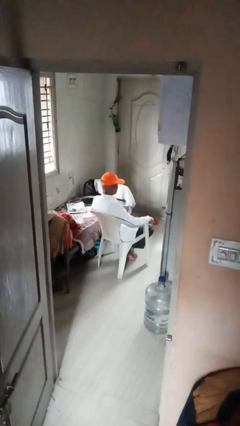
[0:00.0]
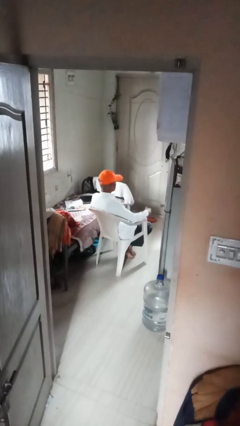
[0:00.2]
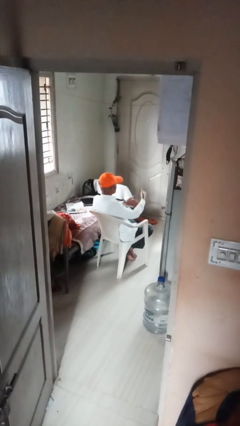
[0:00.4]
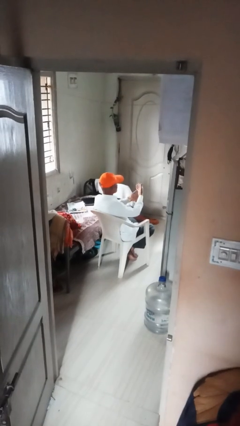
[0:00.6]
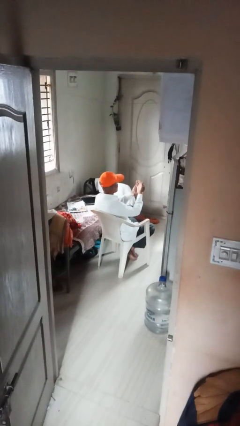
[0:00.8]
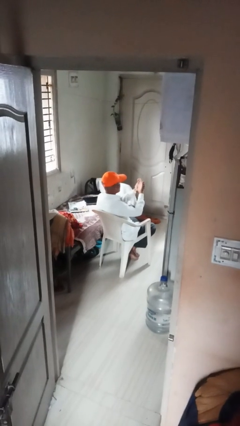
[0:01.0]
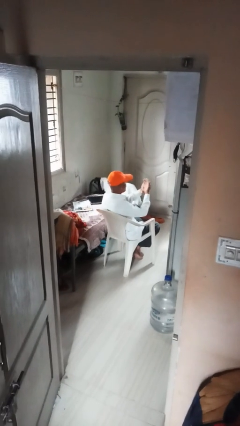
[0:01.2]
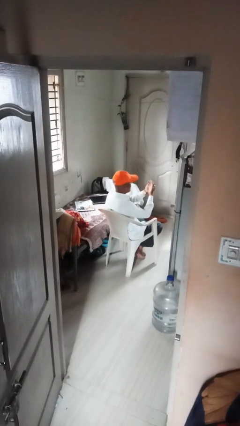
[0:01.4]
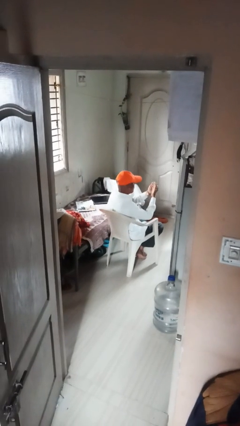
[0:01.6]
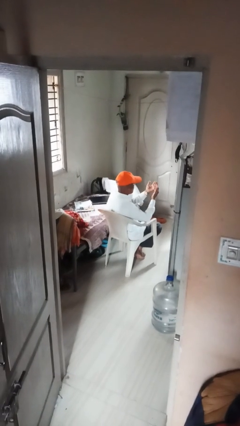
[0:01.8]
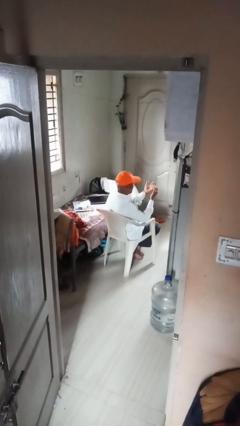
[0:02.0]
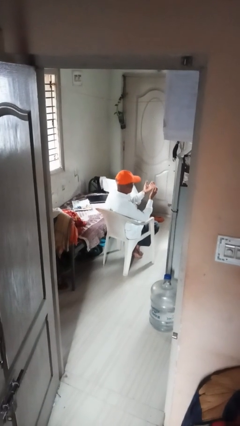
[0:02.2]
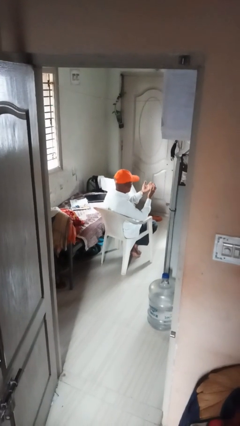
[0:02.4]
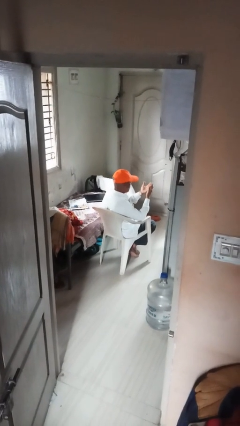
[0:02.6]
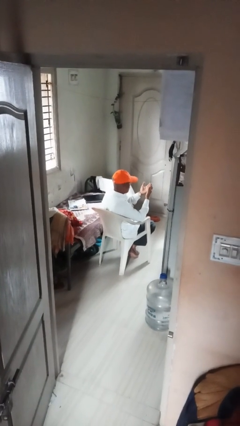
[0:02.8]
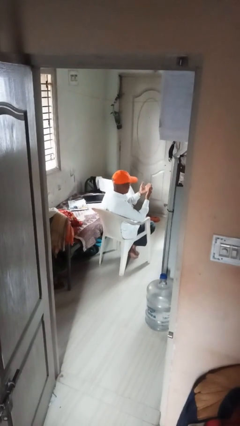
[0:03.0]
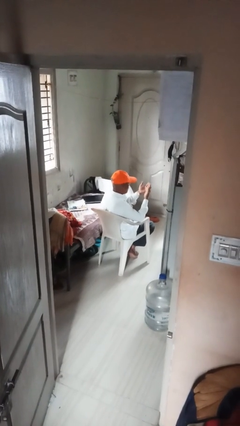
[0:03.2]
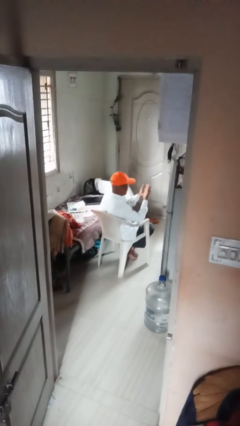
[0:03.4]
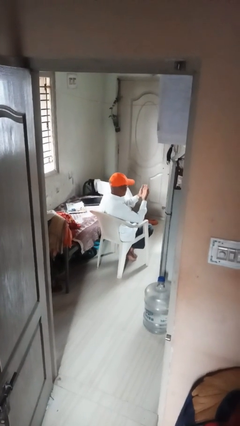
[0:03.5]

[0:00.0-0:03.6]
person looks at hands in lap

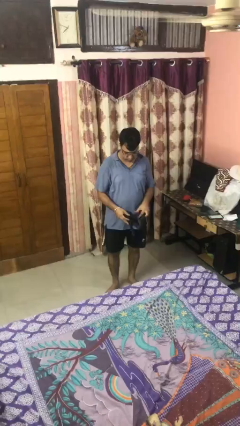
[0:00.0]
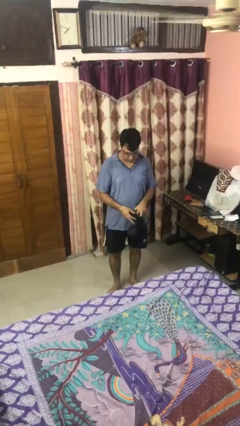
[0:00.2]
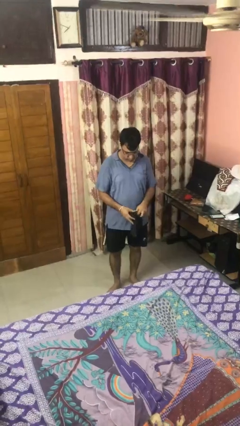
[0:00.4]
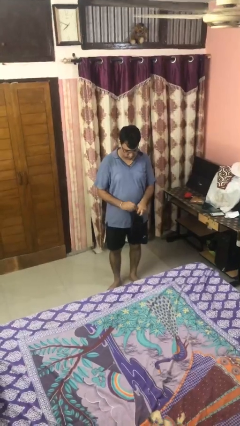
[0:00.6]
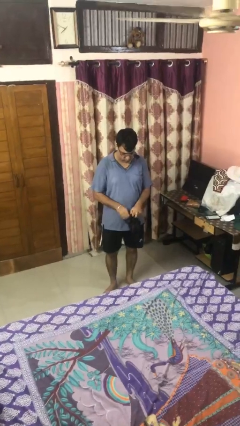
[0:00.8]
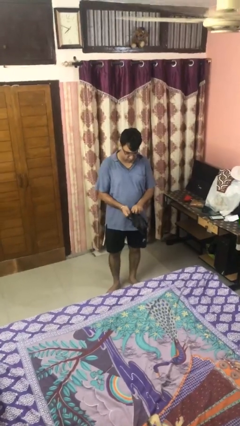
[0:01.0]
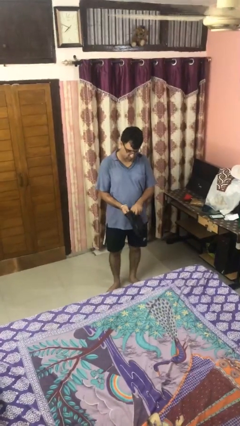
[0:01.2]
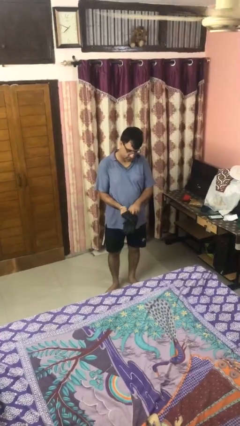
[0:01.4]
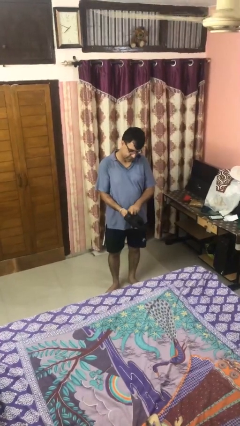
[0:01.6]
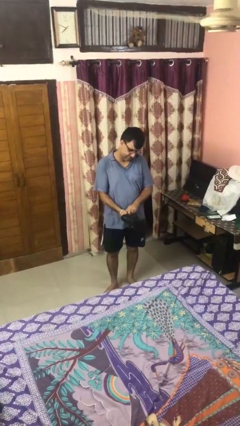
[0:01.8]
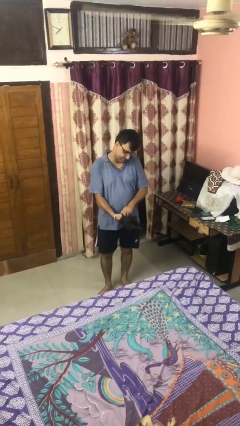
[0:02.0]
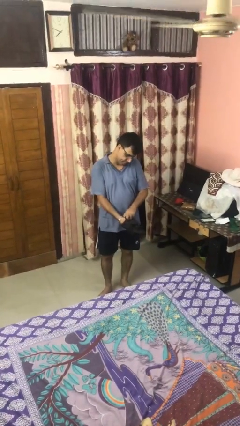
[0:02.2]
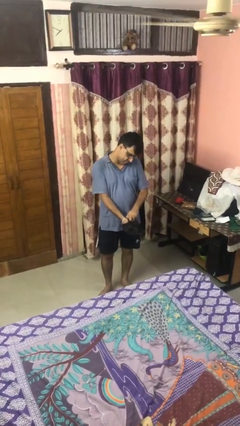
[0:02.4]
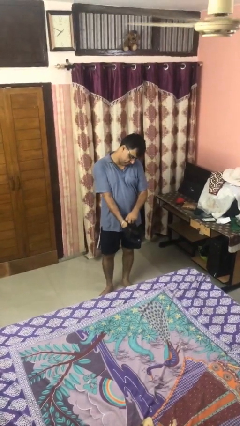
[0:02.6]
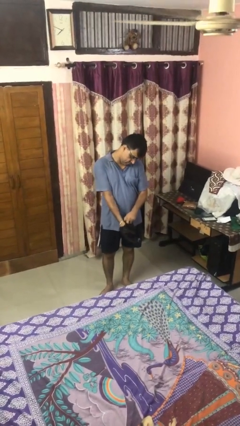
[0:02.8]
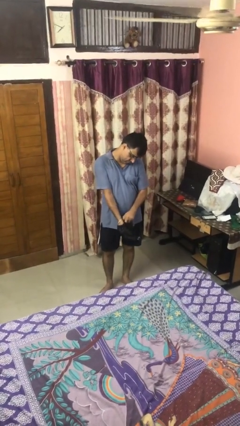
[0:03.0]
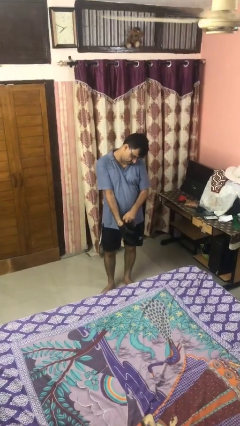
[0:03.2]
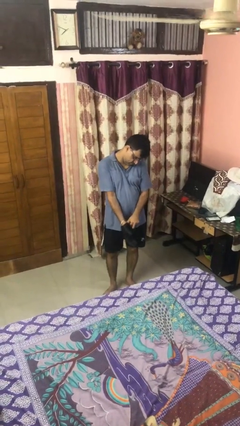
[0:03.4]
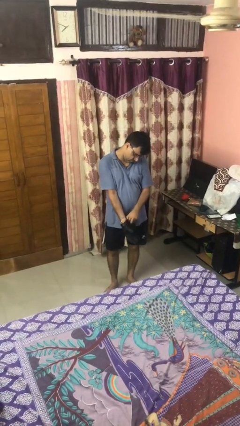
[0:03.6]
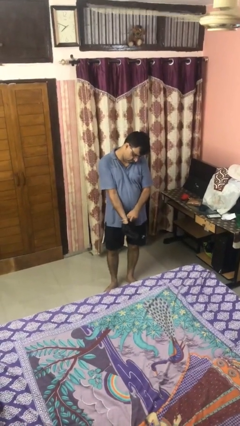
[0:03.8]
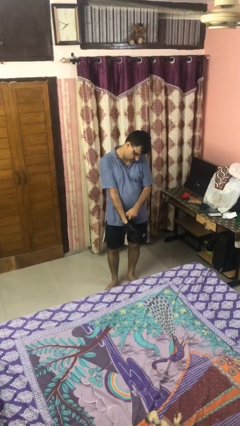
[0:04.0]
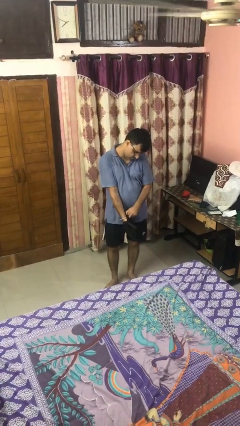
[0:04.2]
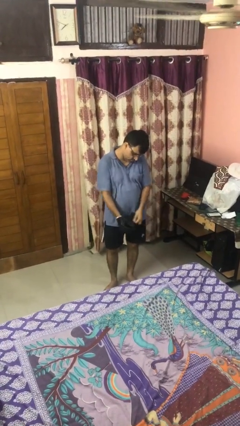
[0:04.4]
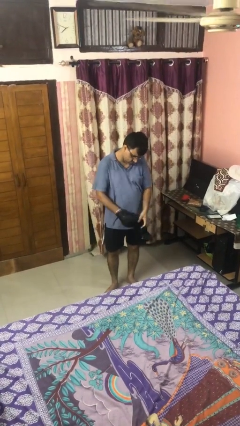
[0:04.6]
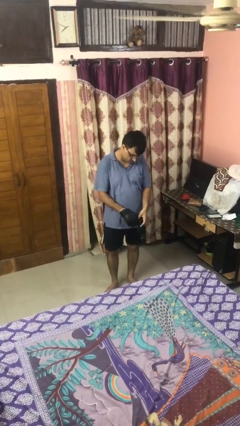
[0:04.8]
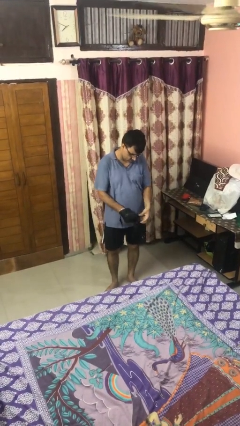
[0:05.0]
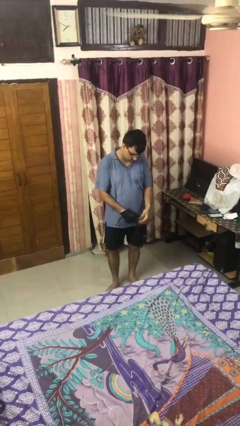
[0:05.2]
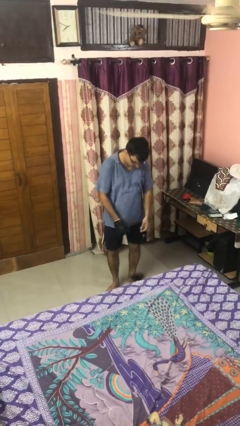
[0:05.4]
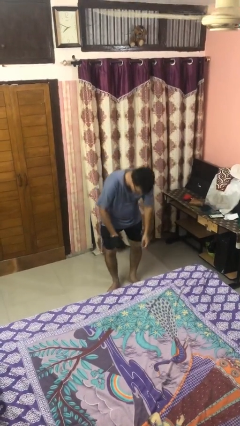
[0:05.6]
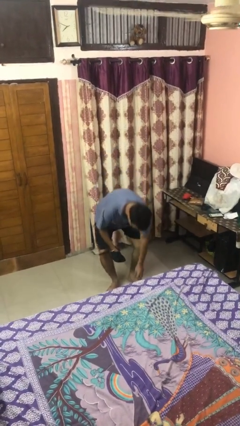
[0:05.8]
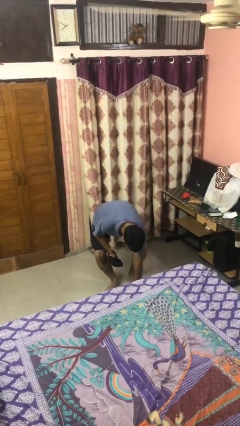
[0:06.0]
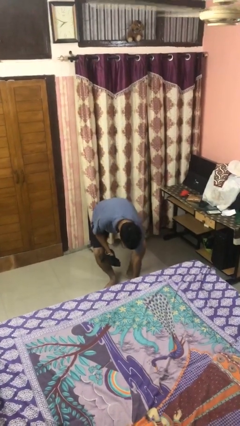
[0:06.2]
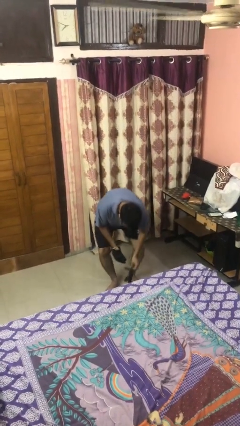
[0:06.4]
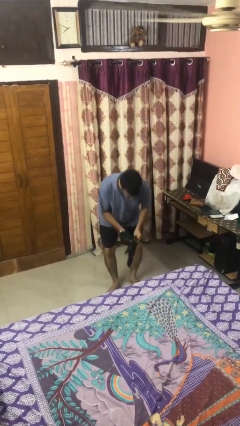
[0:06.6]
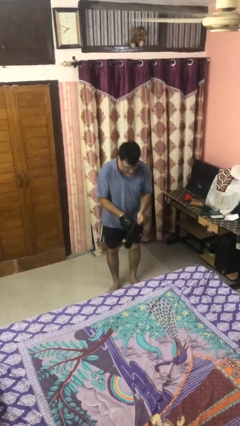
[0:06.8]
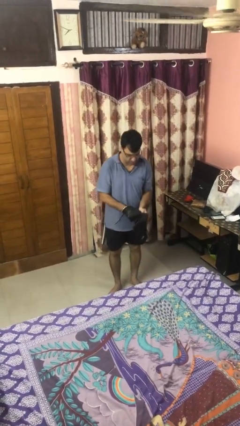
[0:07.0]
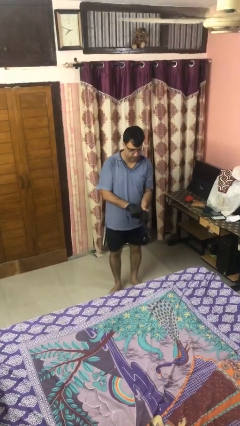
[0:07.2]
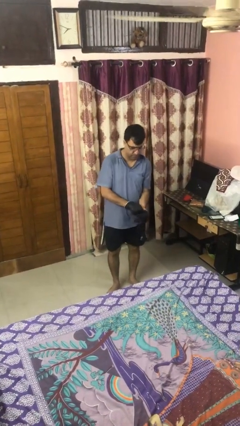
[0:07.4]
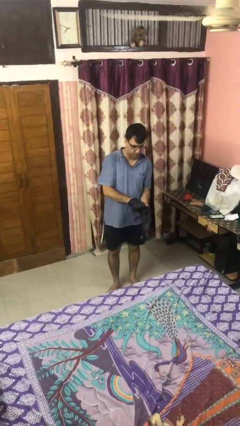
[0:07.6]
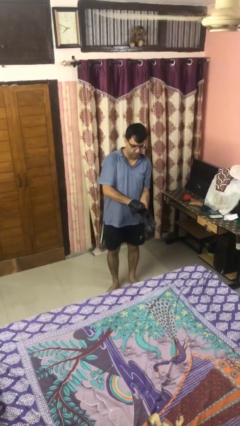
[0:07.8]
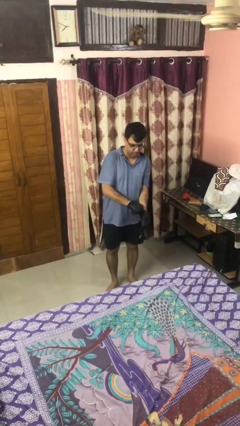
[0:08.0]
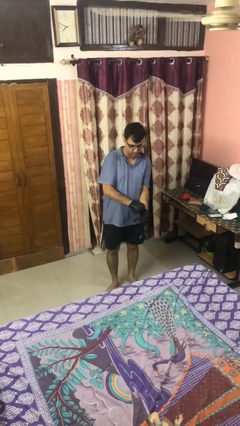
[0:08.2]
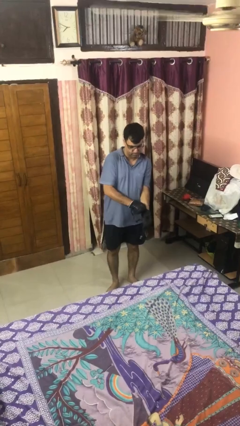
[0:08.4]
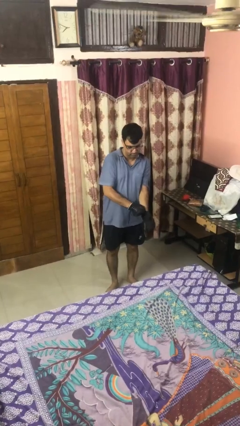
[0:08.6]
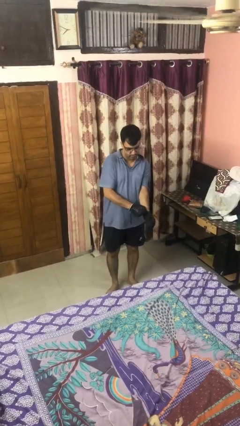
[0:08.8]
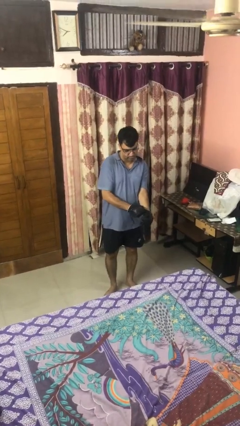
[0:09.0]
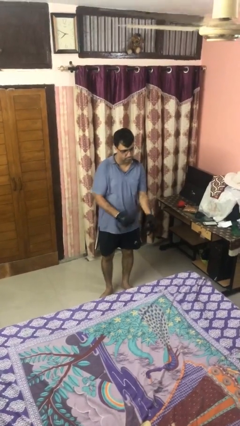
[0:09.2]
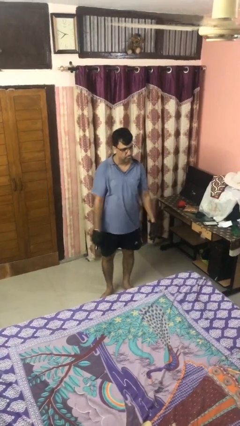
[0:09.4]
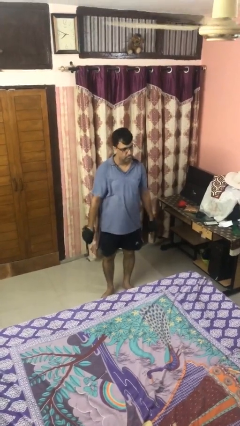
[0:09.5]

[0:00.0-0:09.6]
person puts on gloves

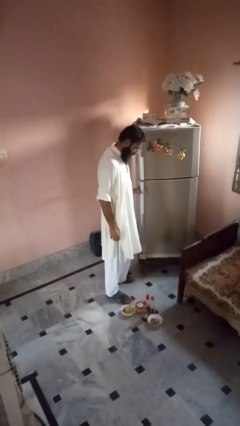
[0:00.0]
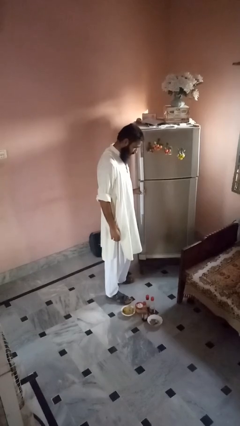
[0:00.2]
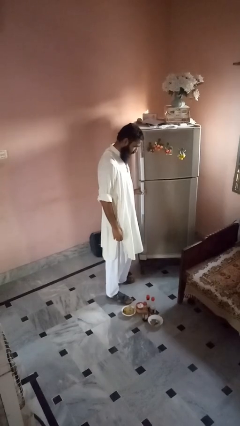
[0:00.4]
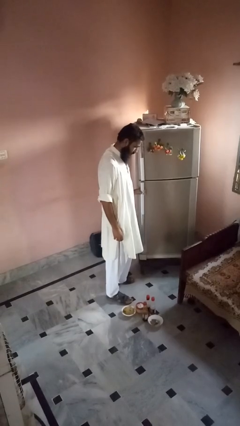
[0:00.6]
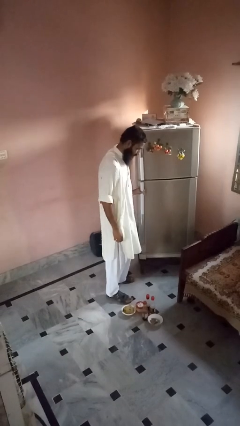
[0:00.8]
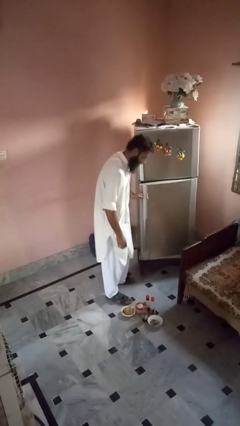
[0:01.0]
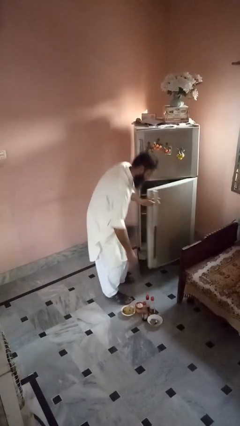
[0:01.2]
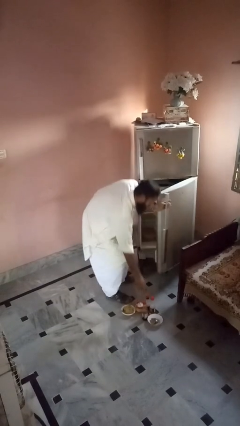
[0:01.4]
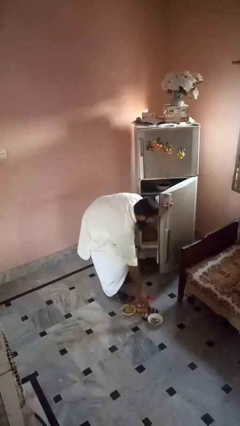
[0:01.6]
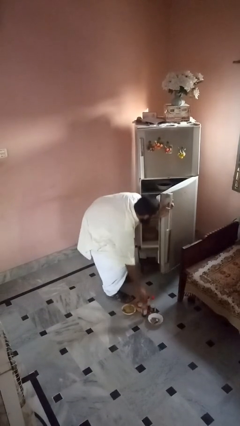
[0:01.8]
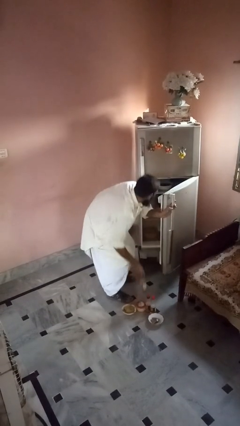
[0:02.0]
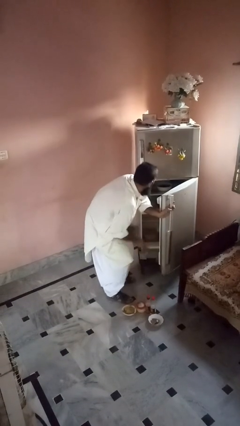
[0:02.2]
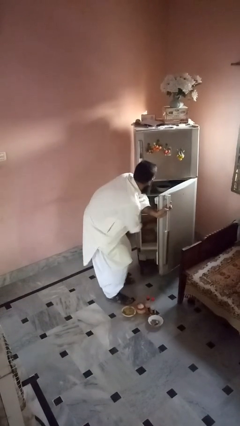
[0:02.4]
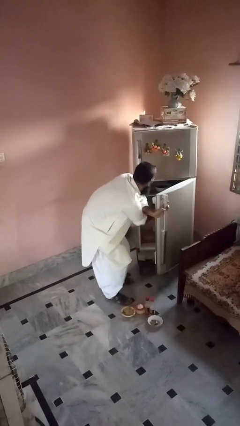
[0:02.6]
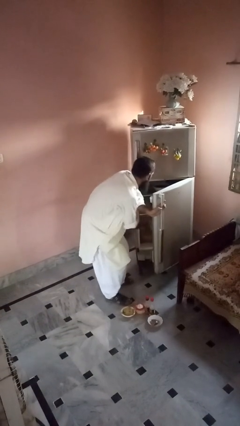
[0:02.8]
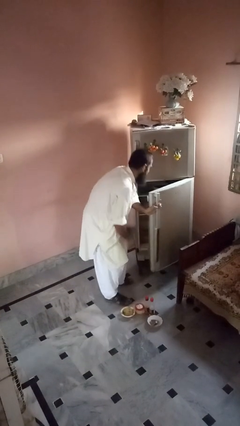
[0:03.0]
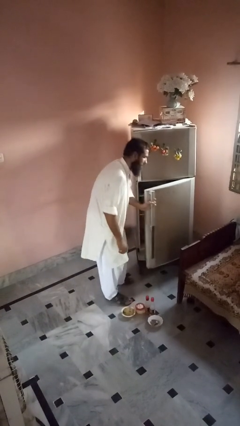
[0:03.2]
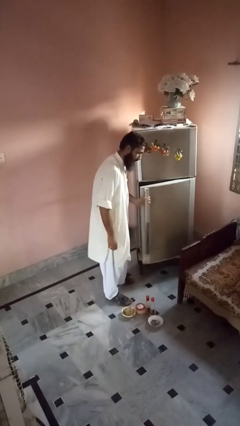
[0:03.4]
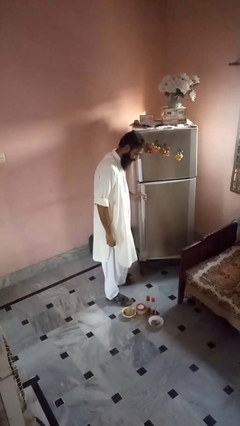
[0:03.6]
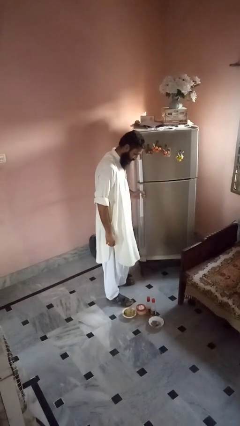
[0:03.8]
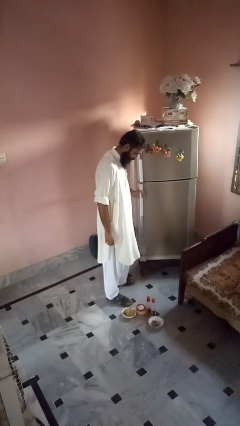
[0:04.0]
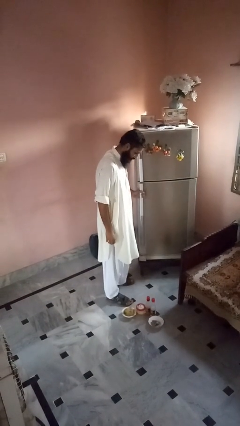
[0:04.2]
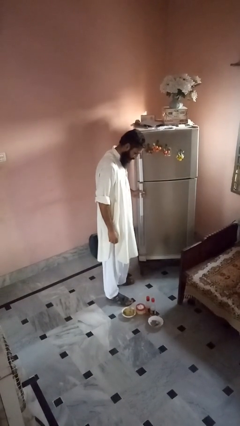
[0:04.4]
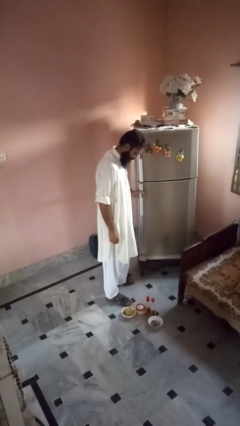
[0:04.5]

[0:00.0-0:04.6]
person loads groceries into refrigerator
